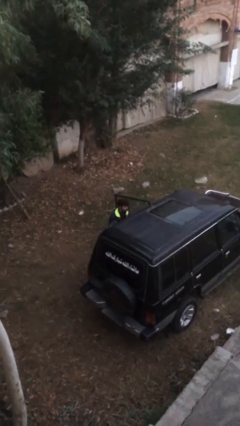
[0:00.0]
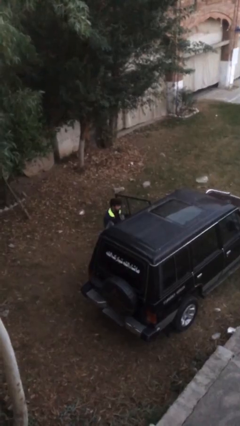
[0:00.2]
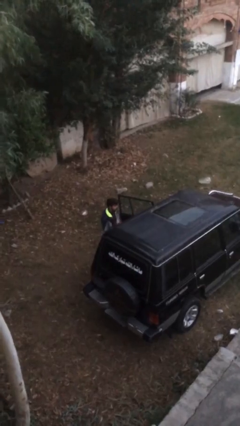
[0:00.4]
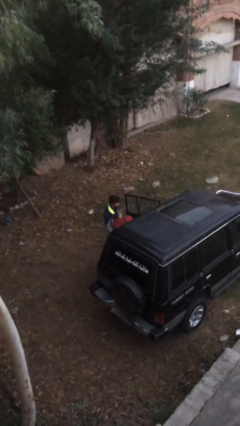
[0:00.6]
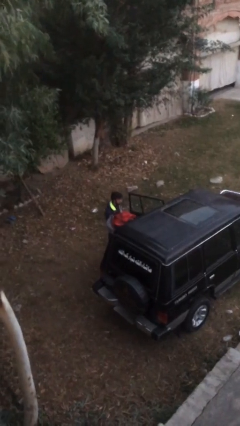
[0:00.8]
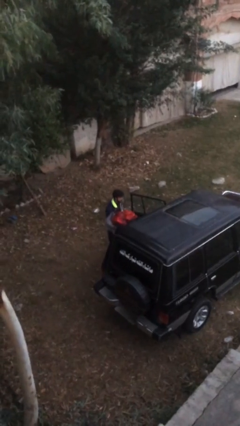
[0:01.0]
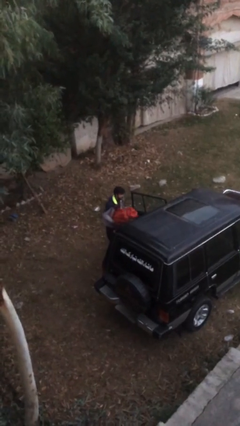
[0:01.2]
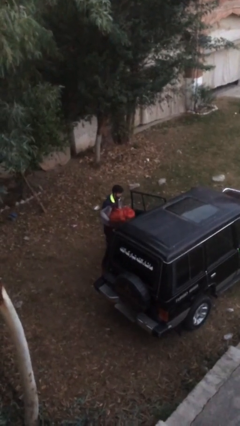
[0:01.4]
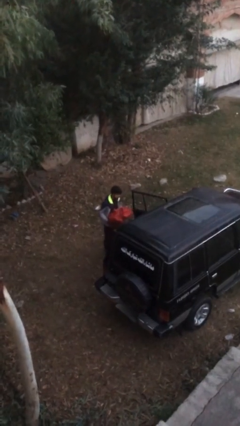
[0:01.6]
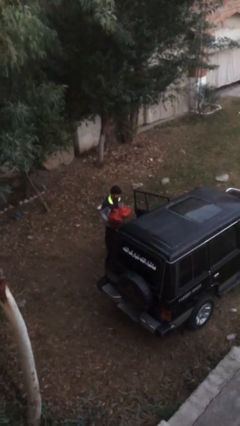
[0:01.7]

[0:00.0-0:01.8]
person unloads car

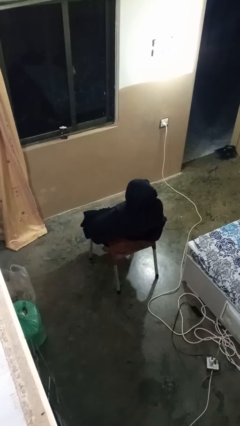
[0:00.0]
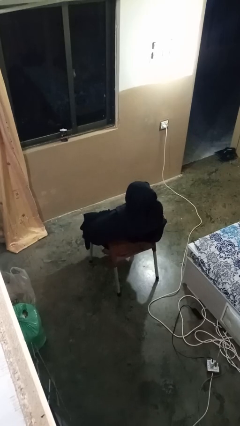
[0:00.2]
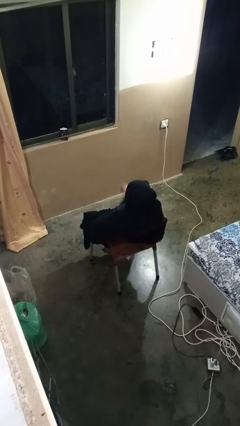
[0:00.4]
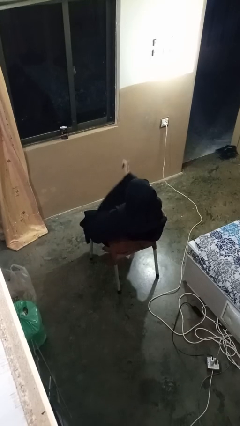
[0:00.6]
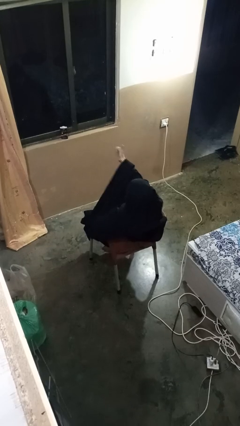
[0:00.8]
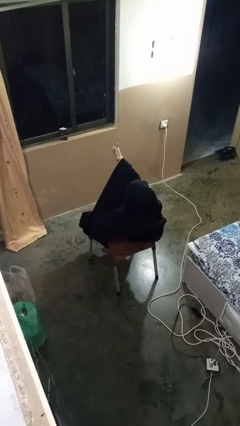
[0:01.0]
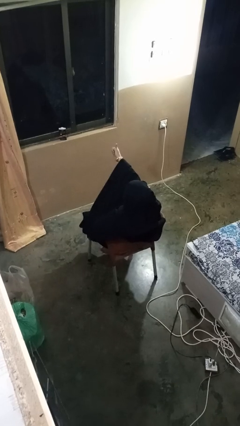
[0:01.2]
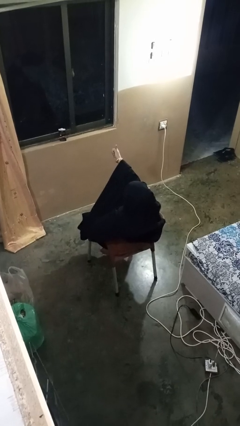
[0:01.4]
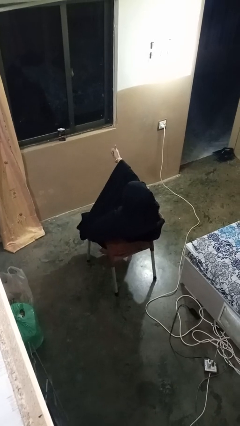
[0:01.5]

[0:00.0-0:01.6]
person gestures thumbs up

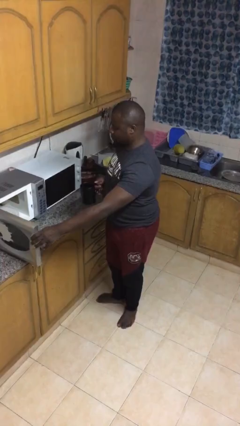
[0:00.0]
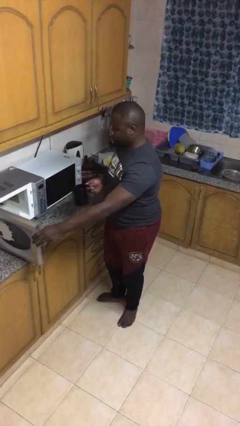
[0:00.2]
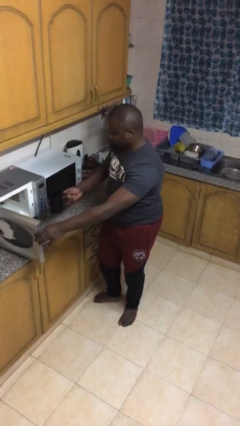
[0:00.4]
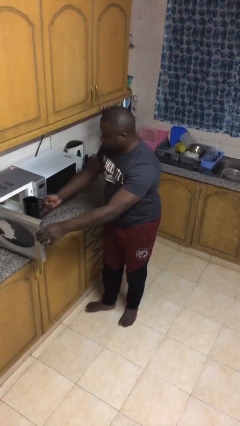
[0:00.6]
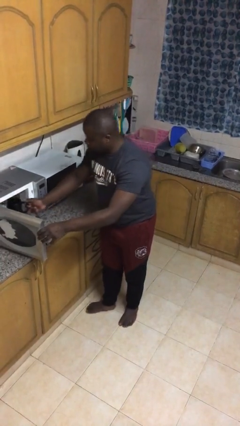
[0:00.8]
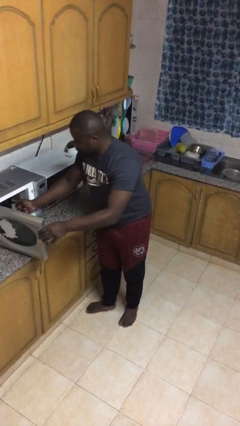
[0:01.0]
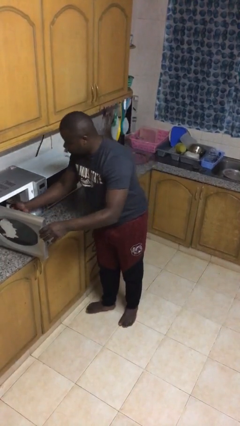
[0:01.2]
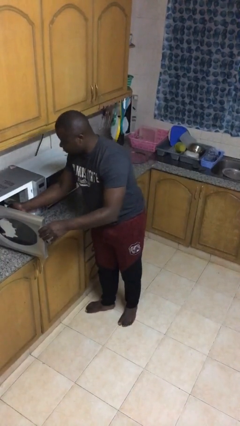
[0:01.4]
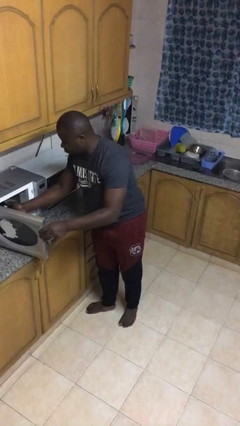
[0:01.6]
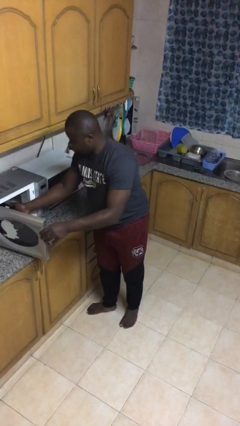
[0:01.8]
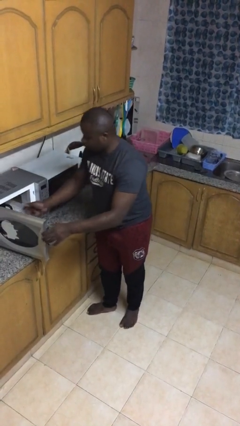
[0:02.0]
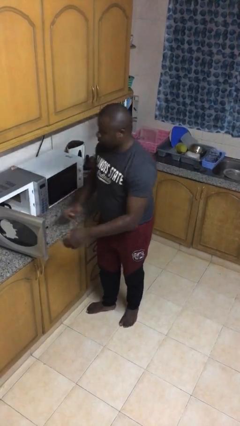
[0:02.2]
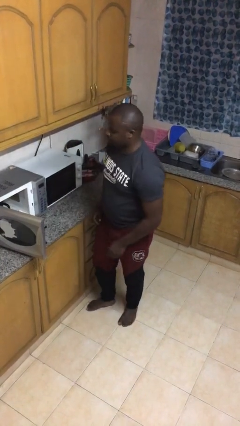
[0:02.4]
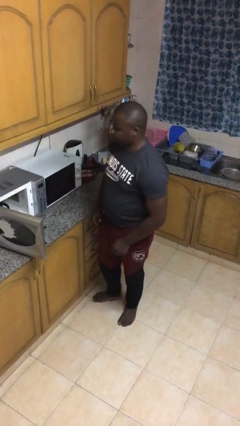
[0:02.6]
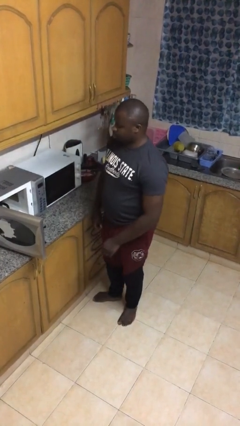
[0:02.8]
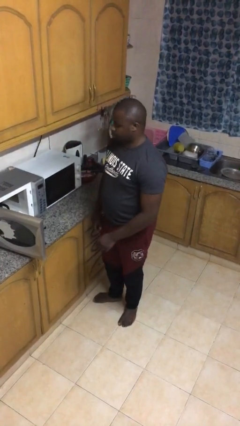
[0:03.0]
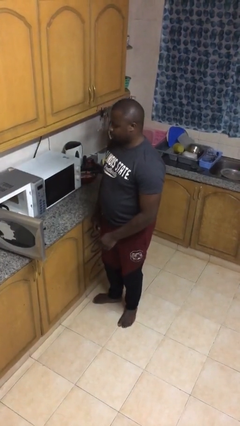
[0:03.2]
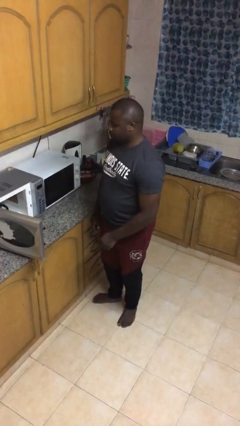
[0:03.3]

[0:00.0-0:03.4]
person puts object into microwave

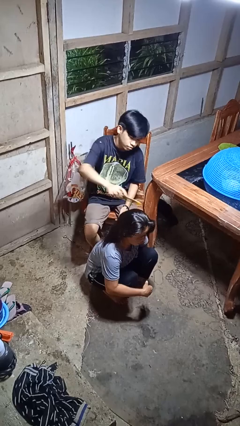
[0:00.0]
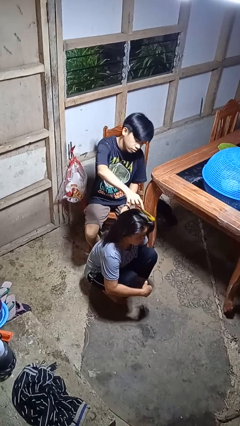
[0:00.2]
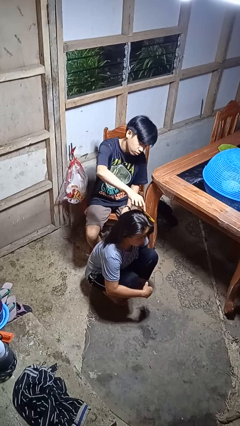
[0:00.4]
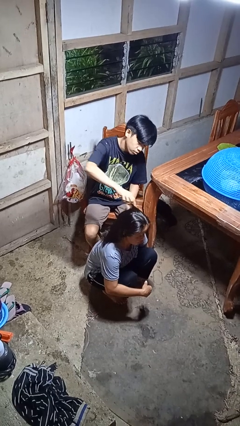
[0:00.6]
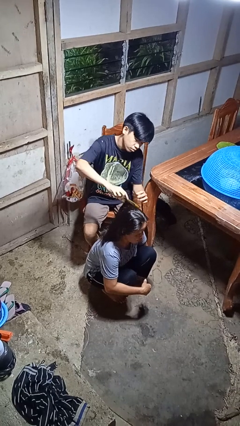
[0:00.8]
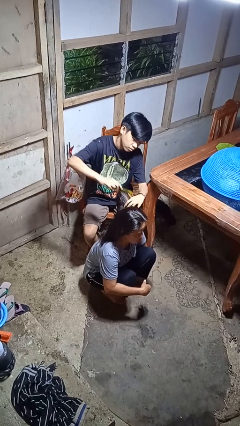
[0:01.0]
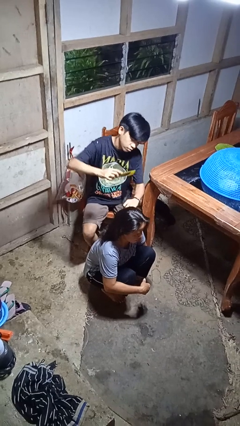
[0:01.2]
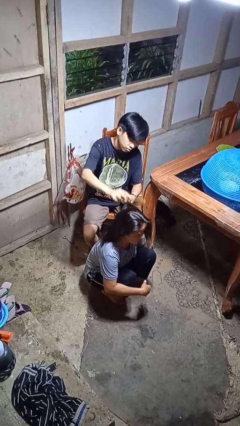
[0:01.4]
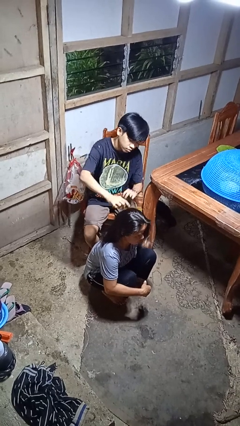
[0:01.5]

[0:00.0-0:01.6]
person brushes hair of person

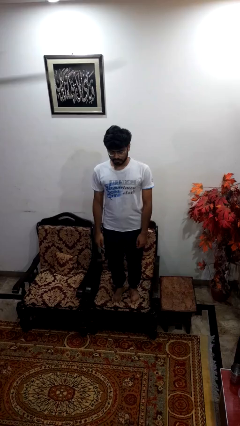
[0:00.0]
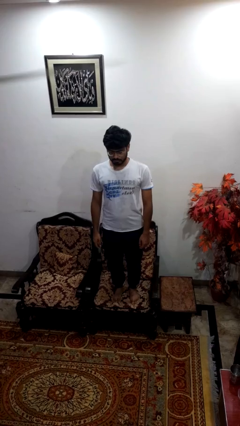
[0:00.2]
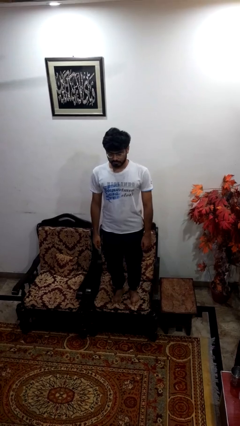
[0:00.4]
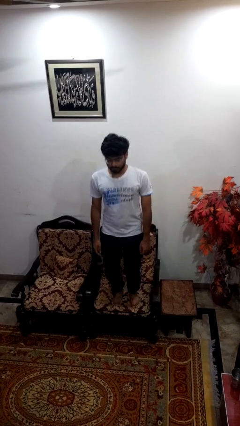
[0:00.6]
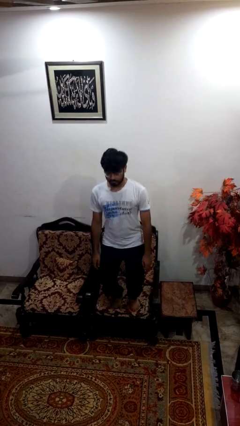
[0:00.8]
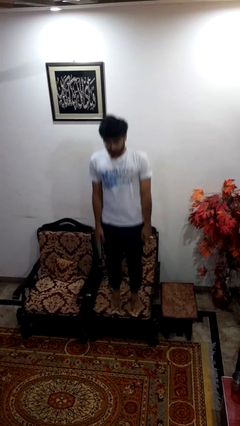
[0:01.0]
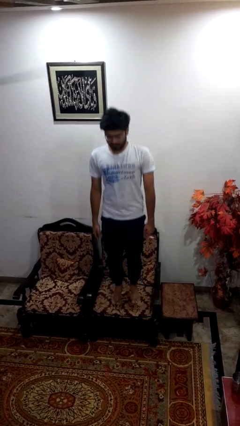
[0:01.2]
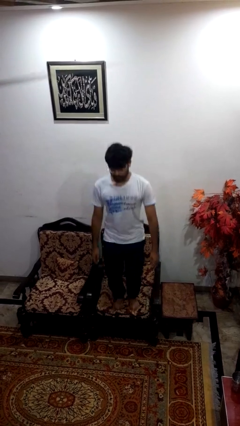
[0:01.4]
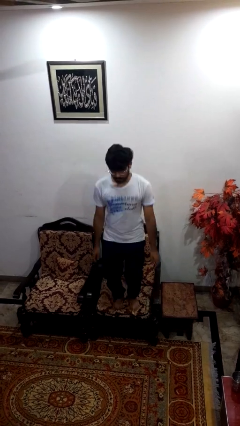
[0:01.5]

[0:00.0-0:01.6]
person jumps on couch

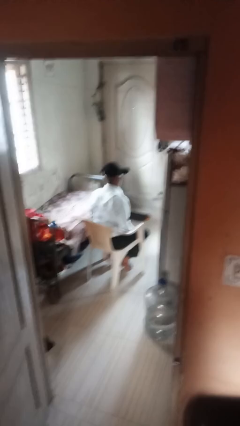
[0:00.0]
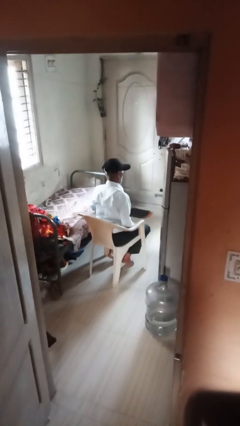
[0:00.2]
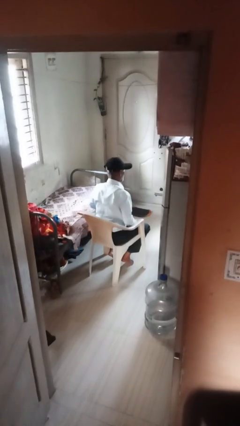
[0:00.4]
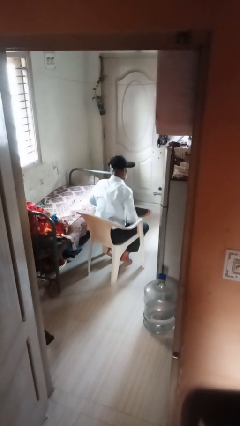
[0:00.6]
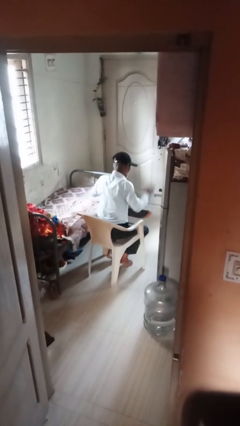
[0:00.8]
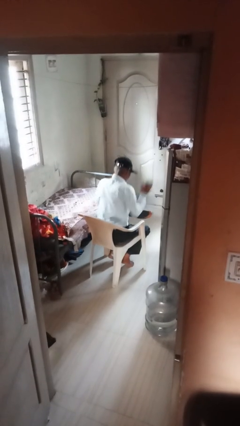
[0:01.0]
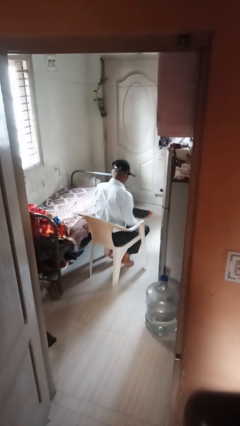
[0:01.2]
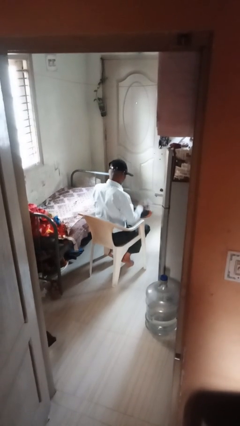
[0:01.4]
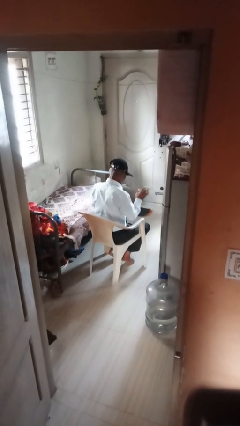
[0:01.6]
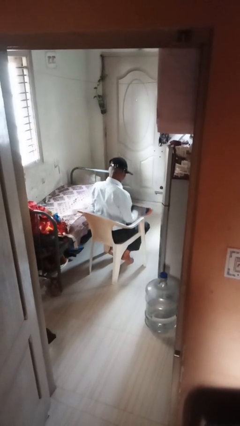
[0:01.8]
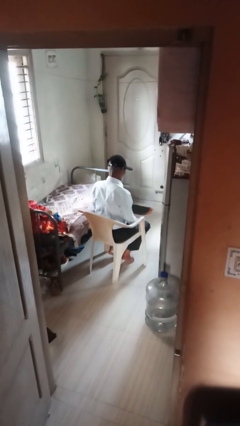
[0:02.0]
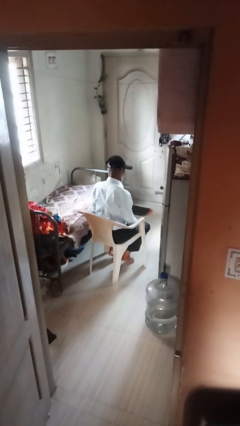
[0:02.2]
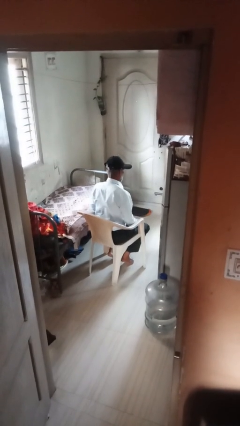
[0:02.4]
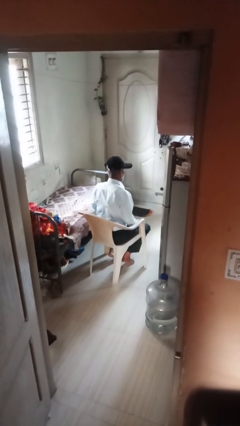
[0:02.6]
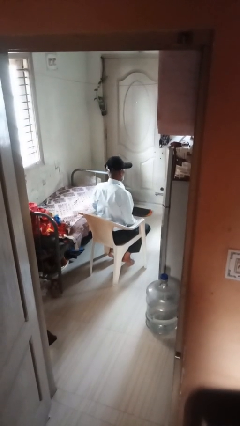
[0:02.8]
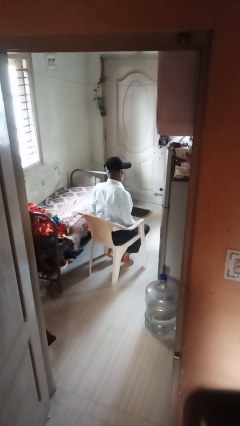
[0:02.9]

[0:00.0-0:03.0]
person slaps hands on thighs

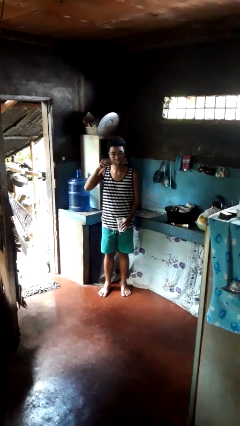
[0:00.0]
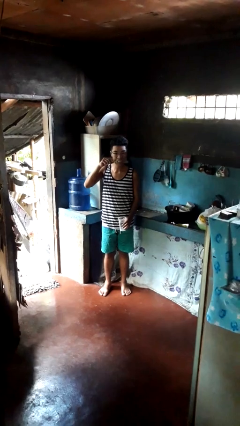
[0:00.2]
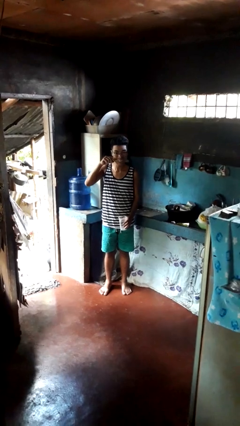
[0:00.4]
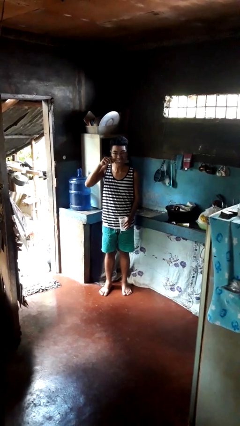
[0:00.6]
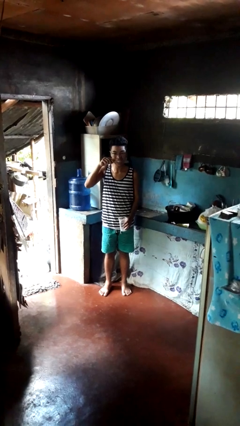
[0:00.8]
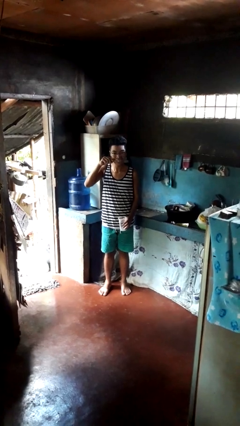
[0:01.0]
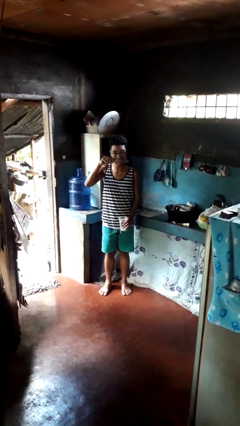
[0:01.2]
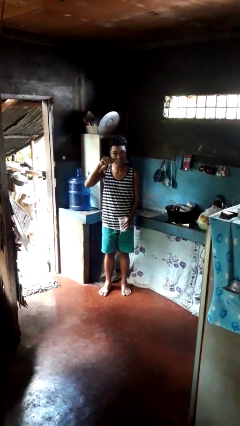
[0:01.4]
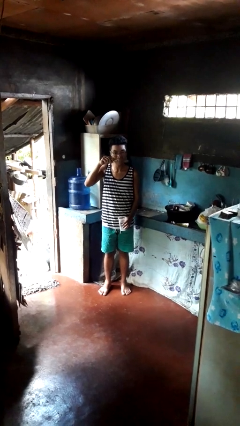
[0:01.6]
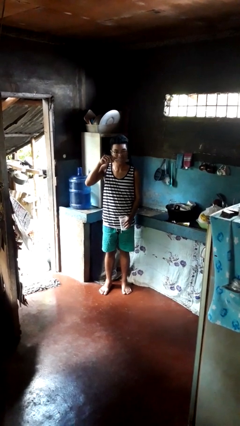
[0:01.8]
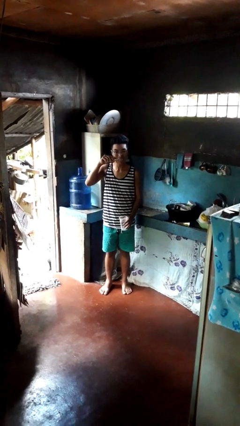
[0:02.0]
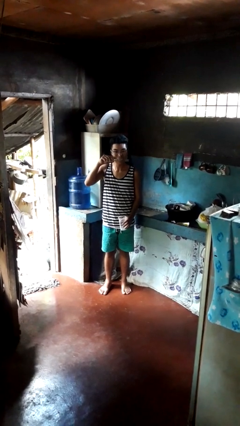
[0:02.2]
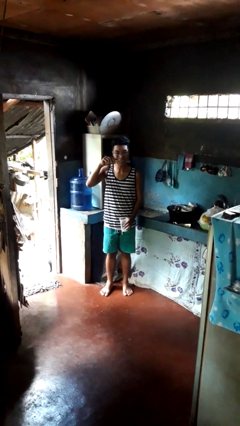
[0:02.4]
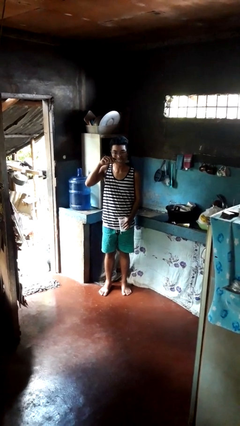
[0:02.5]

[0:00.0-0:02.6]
person brushes teeth

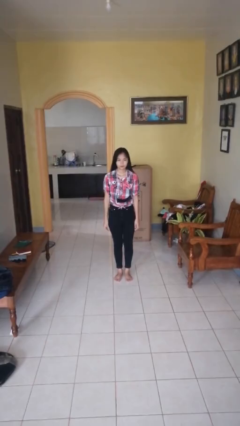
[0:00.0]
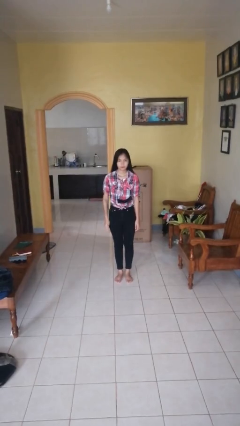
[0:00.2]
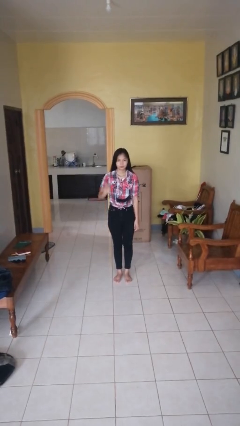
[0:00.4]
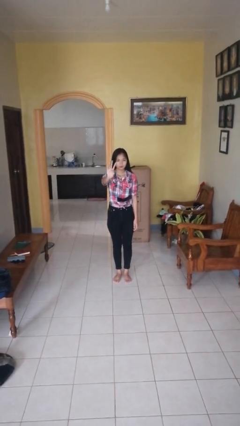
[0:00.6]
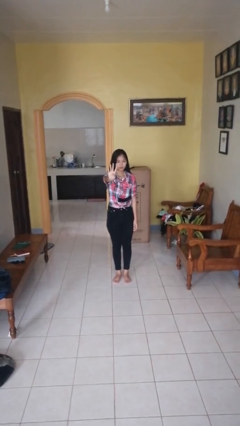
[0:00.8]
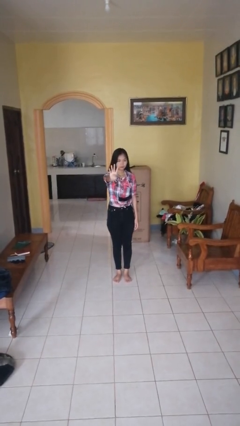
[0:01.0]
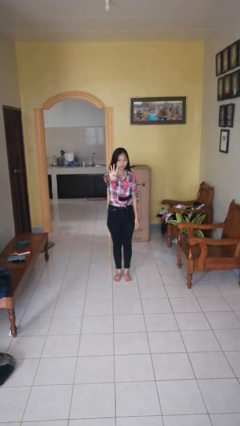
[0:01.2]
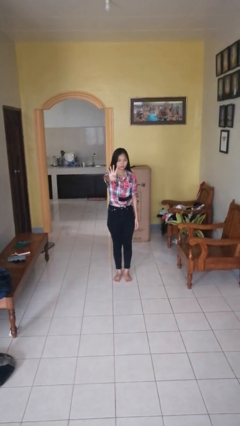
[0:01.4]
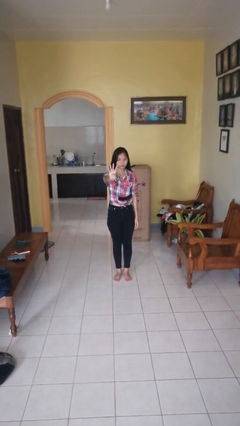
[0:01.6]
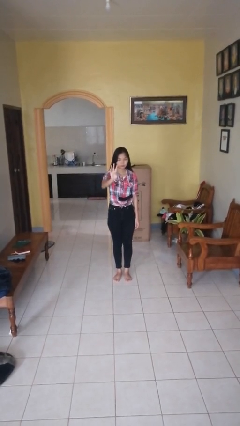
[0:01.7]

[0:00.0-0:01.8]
person gestures number four
